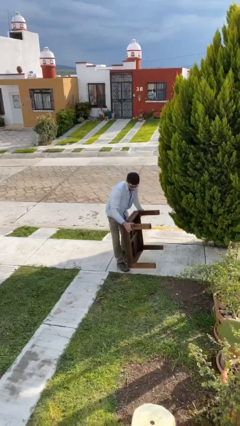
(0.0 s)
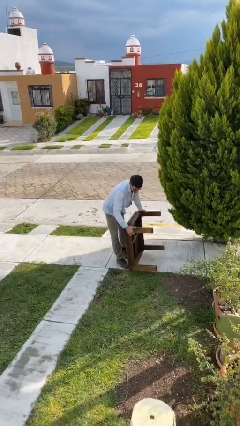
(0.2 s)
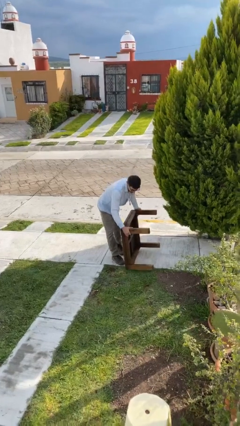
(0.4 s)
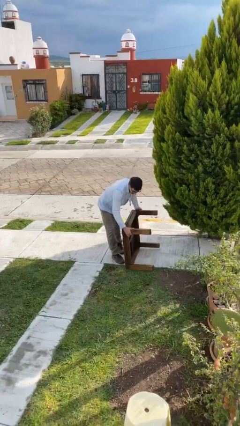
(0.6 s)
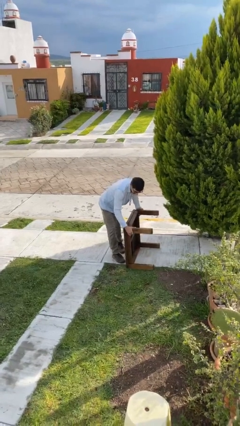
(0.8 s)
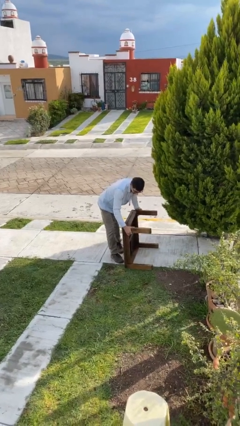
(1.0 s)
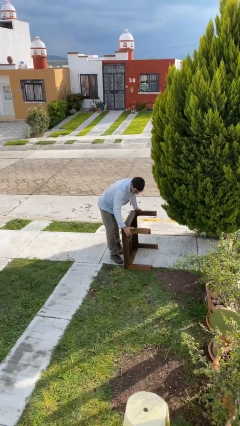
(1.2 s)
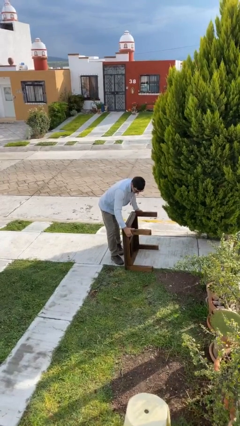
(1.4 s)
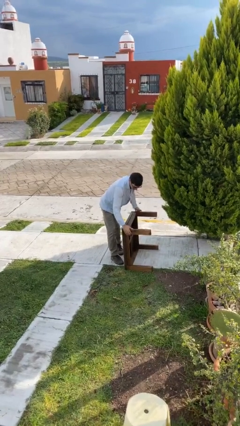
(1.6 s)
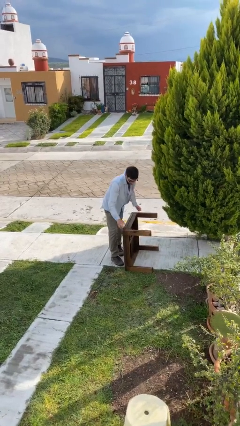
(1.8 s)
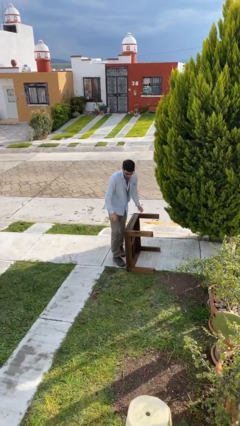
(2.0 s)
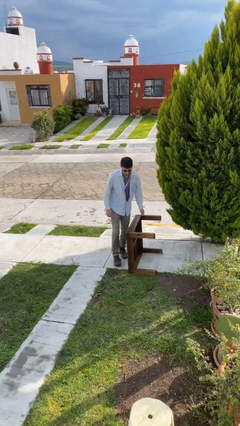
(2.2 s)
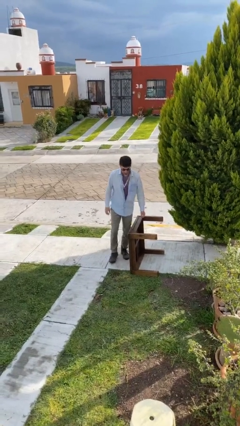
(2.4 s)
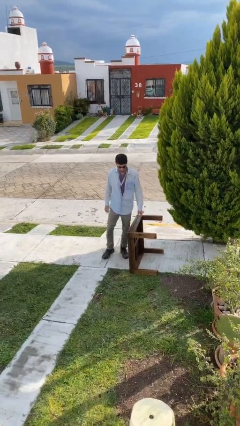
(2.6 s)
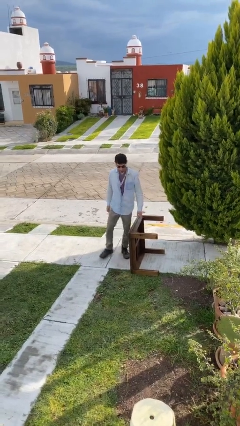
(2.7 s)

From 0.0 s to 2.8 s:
person puts down object on floor

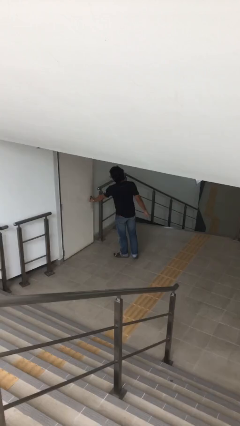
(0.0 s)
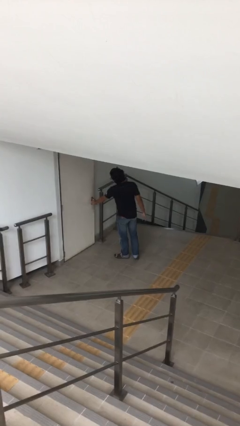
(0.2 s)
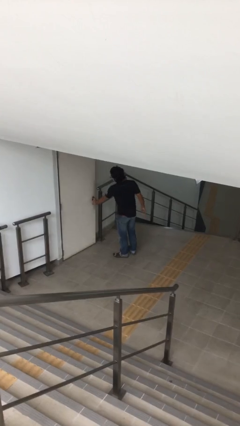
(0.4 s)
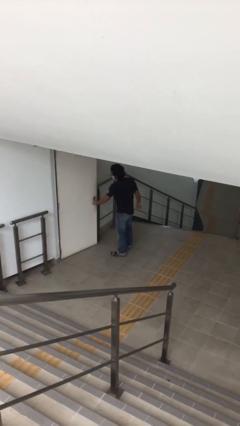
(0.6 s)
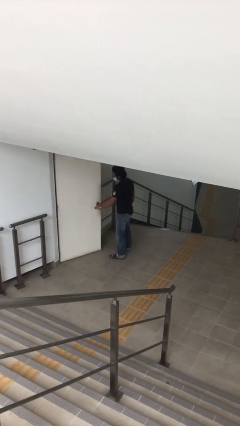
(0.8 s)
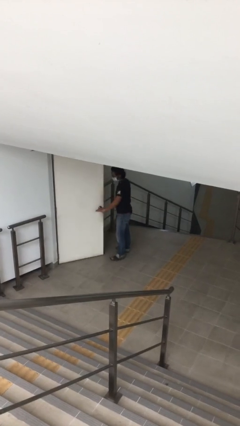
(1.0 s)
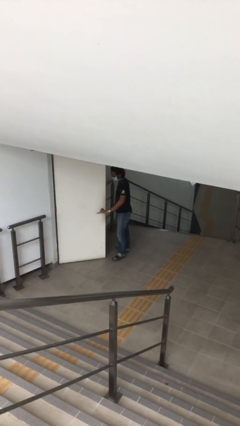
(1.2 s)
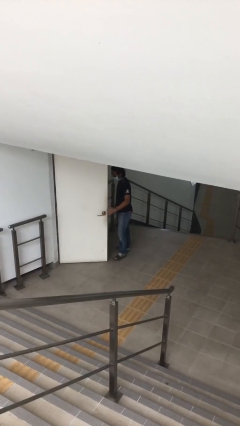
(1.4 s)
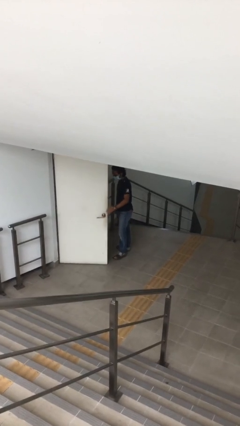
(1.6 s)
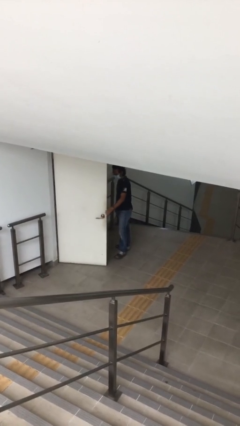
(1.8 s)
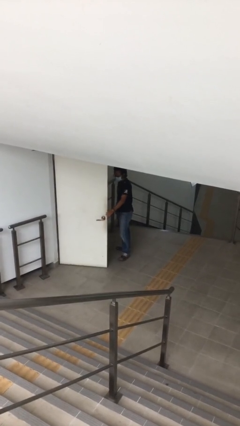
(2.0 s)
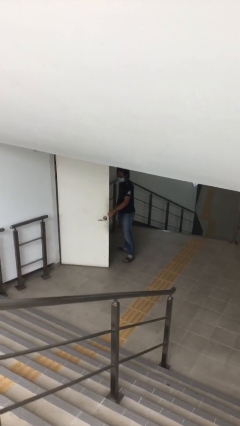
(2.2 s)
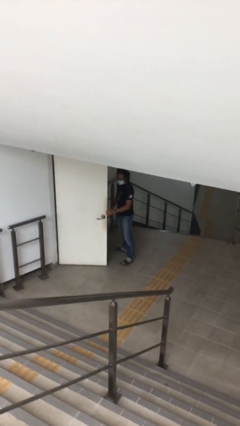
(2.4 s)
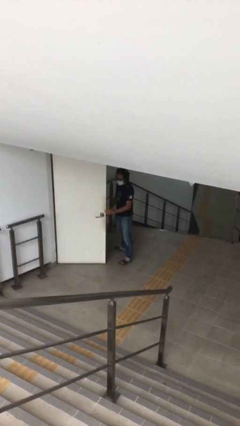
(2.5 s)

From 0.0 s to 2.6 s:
person opens facility door

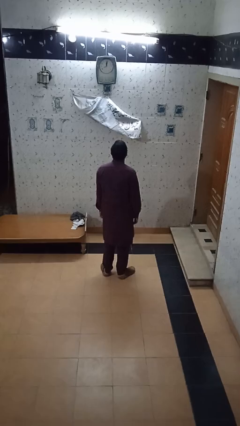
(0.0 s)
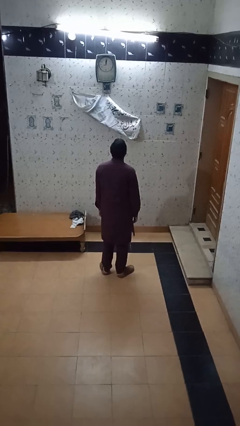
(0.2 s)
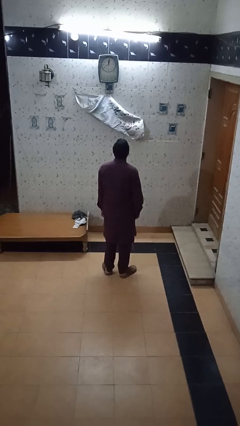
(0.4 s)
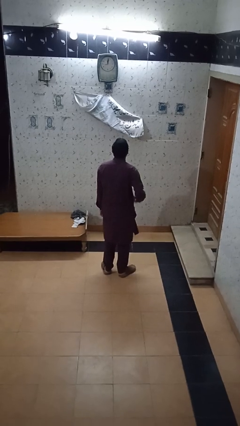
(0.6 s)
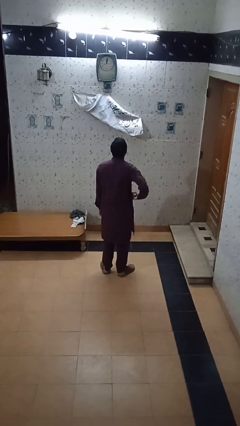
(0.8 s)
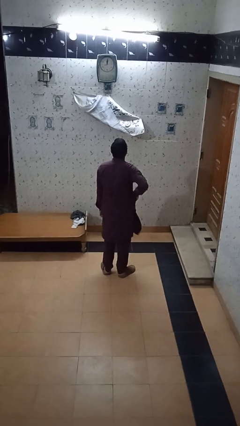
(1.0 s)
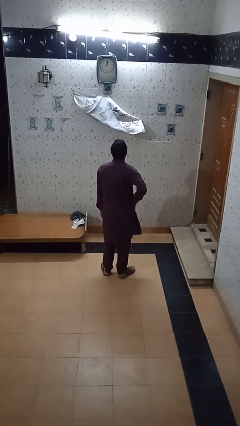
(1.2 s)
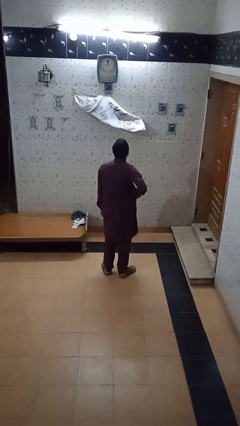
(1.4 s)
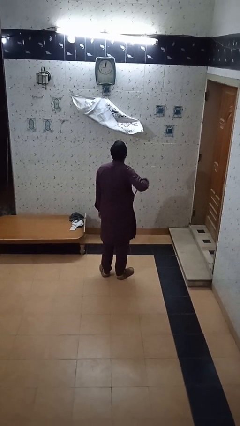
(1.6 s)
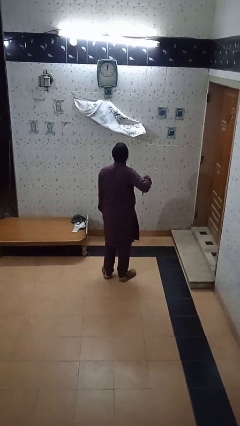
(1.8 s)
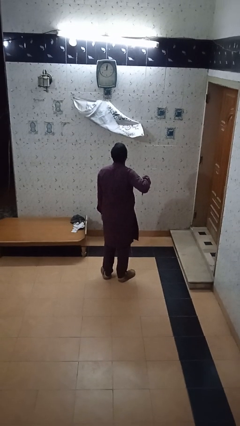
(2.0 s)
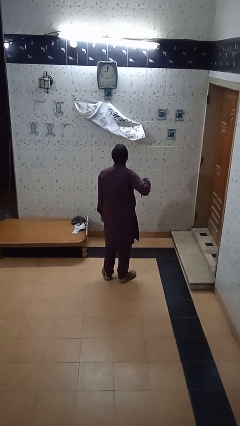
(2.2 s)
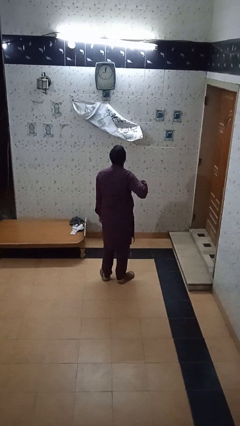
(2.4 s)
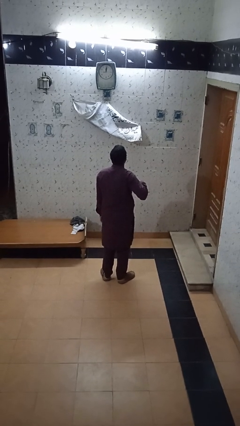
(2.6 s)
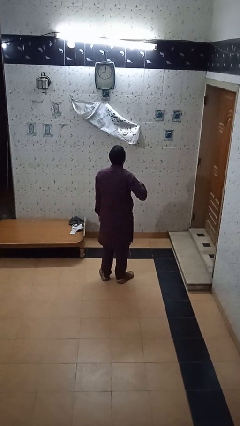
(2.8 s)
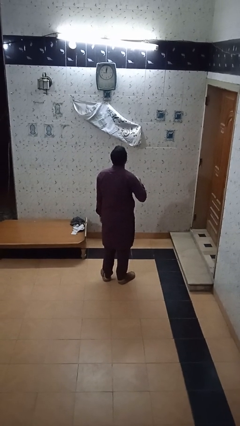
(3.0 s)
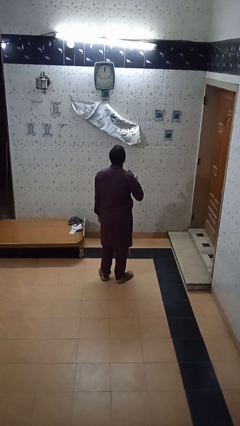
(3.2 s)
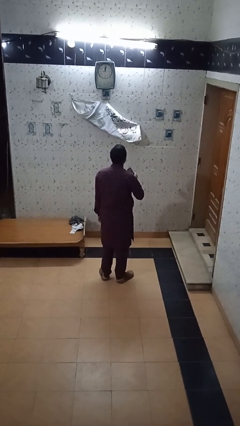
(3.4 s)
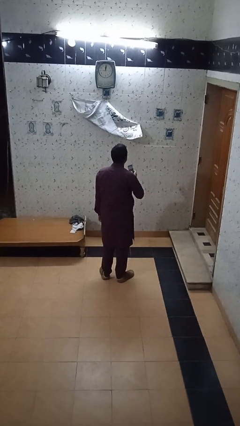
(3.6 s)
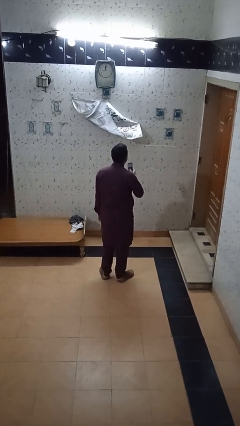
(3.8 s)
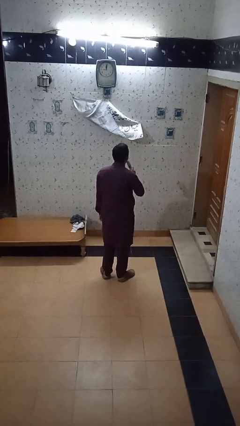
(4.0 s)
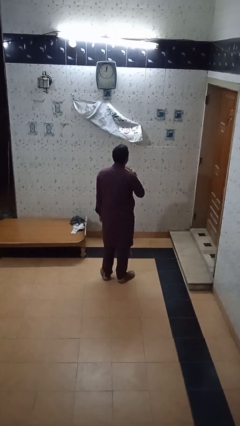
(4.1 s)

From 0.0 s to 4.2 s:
person takes phone from pocket

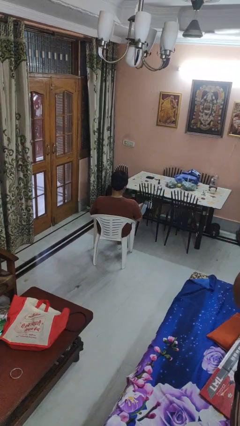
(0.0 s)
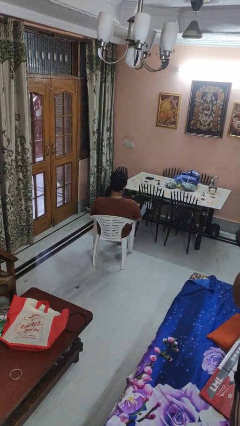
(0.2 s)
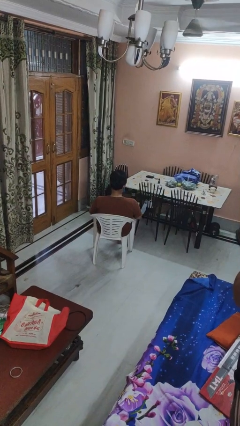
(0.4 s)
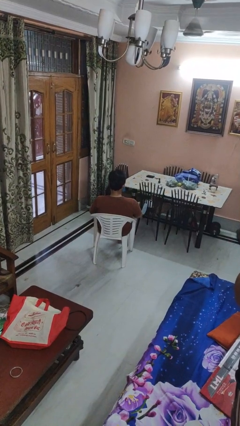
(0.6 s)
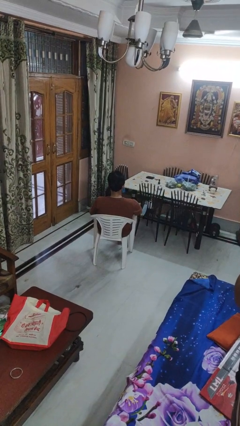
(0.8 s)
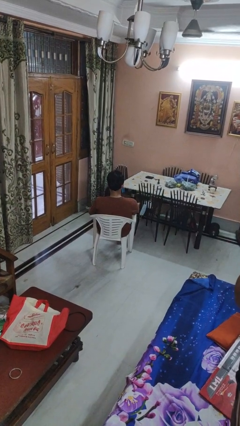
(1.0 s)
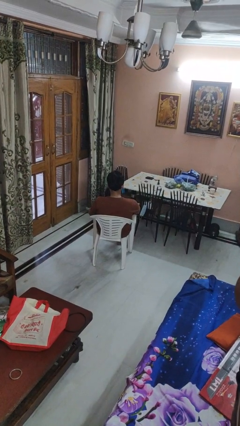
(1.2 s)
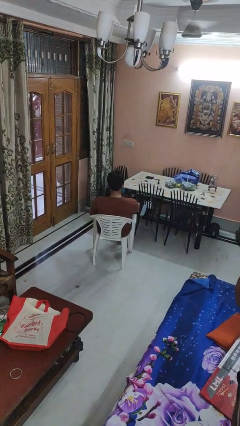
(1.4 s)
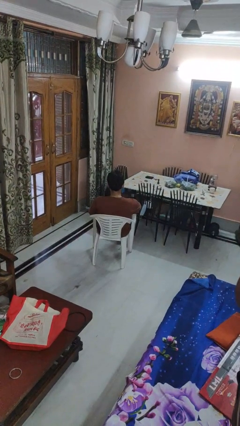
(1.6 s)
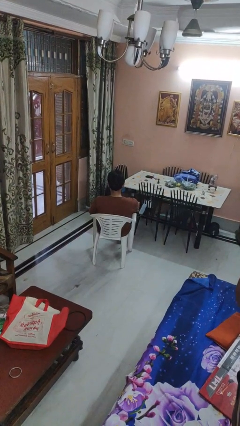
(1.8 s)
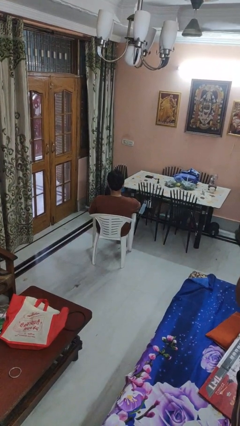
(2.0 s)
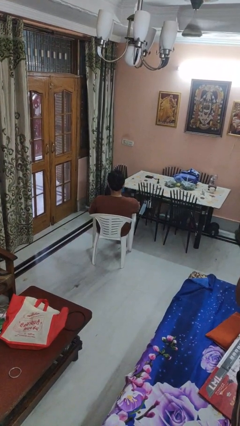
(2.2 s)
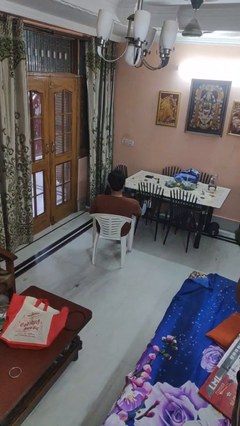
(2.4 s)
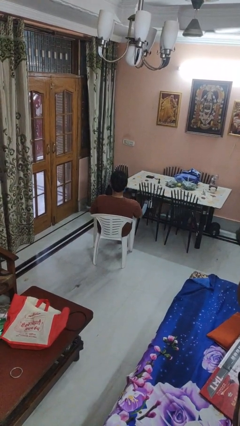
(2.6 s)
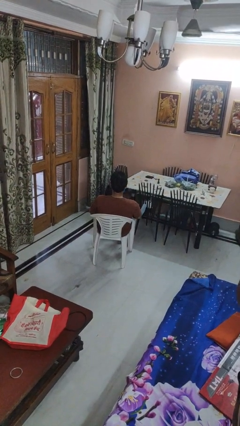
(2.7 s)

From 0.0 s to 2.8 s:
person rubs foot

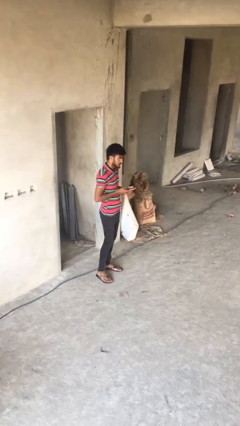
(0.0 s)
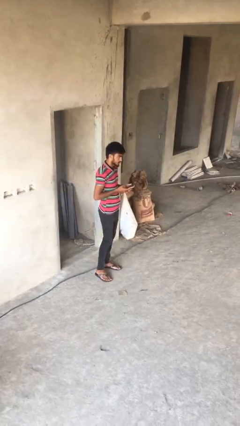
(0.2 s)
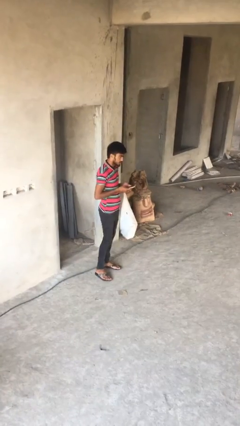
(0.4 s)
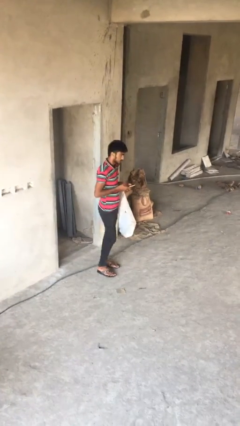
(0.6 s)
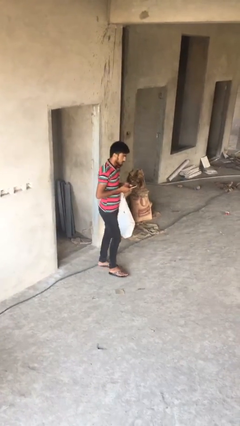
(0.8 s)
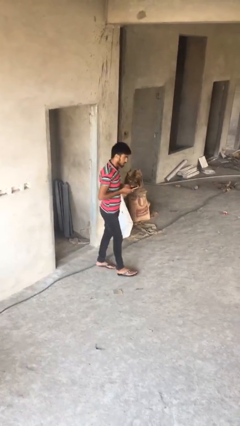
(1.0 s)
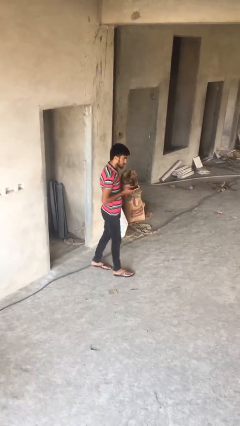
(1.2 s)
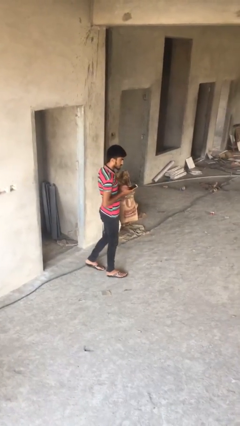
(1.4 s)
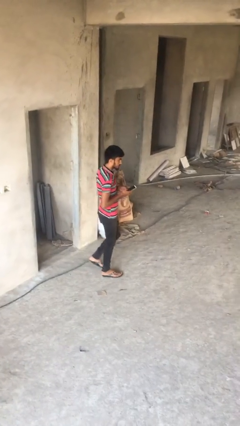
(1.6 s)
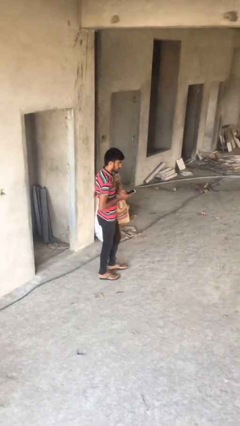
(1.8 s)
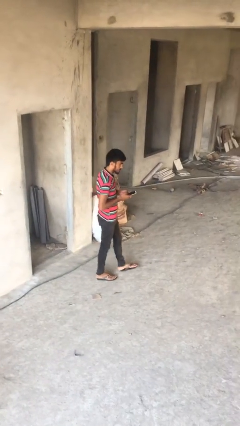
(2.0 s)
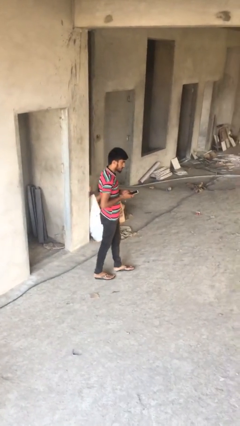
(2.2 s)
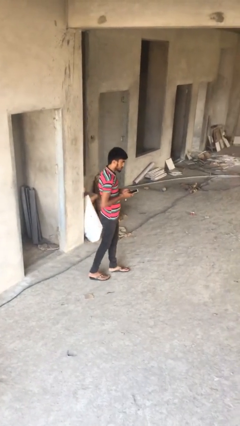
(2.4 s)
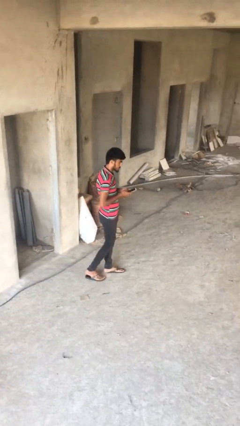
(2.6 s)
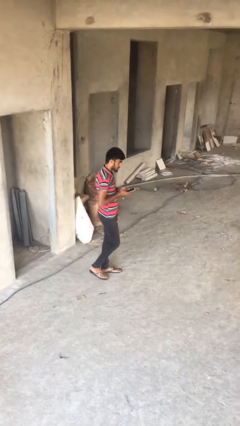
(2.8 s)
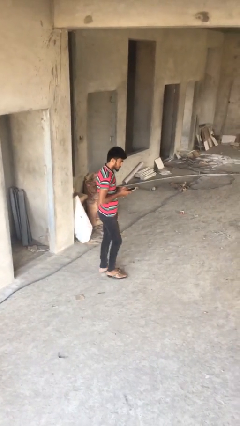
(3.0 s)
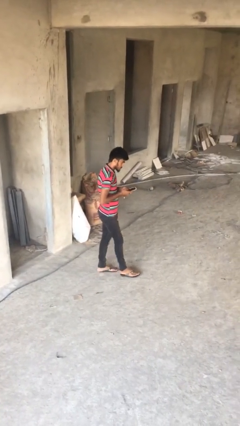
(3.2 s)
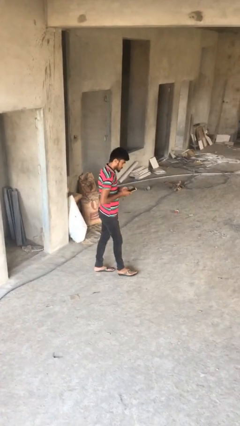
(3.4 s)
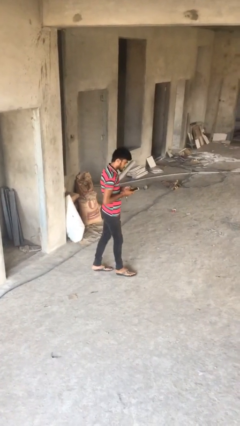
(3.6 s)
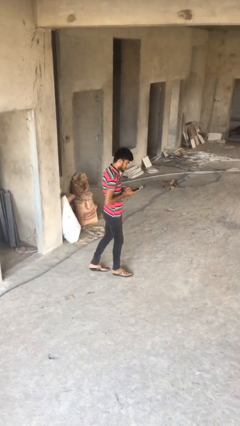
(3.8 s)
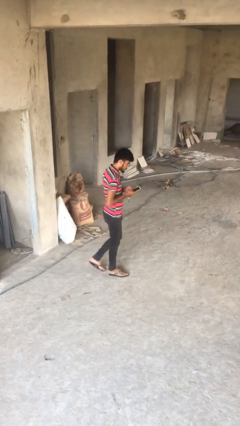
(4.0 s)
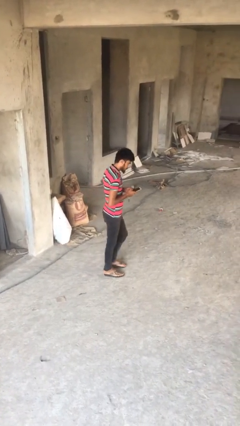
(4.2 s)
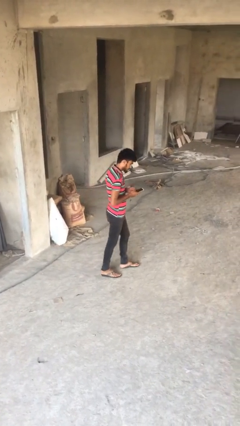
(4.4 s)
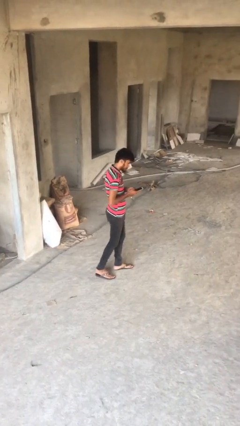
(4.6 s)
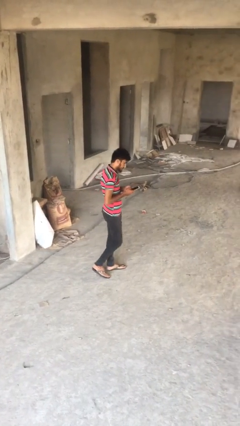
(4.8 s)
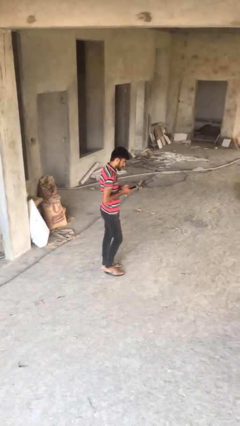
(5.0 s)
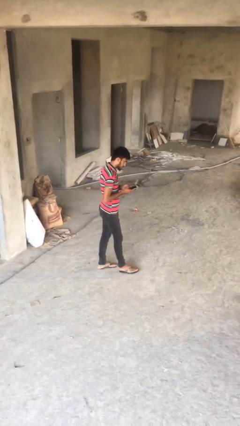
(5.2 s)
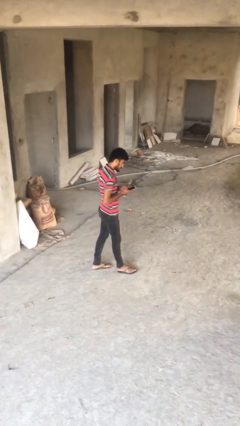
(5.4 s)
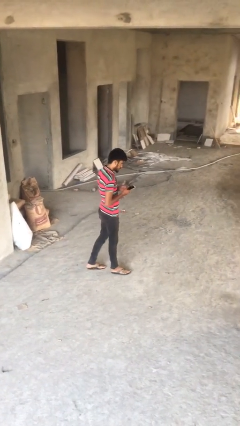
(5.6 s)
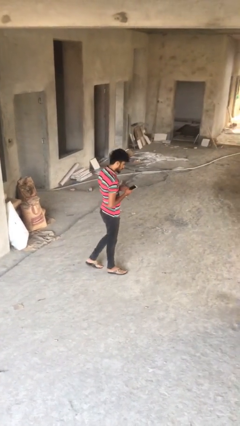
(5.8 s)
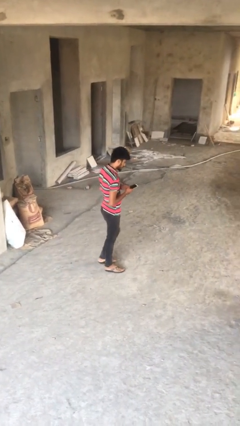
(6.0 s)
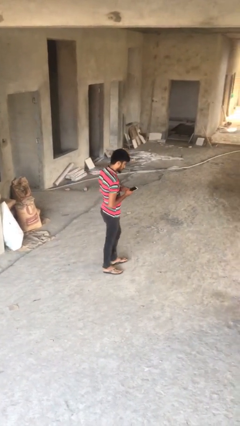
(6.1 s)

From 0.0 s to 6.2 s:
person texts on phone
